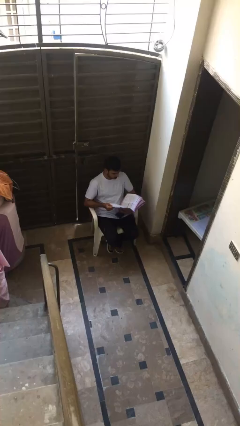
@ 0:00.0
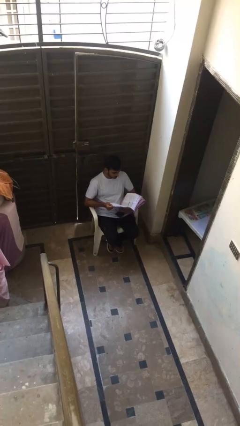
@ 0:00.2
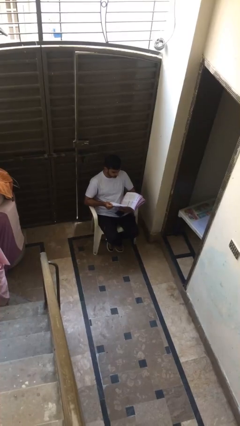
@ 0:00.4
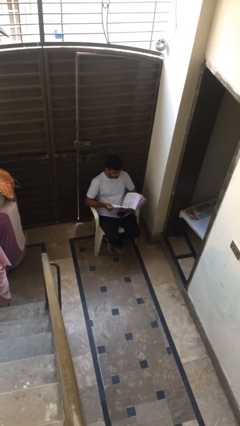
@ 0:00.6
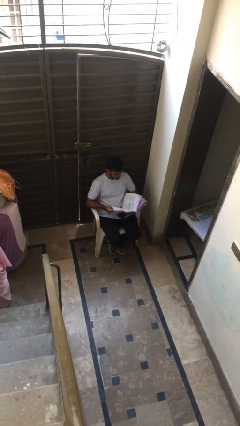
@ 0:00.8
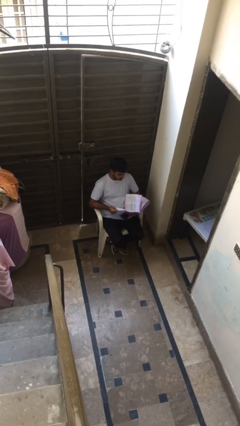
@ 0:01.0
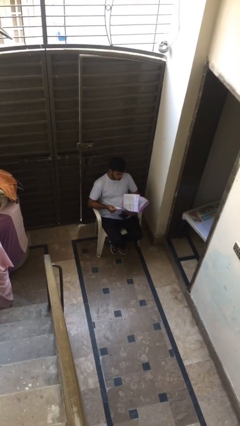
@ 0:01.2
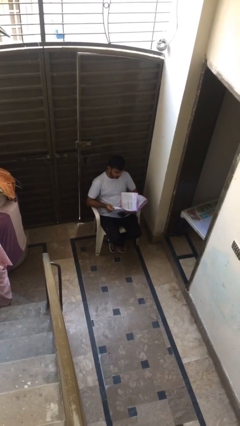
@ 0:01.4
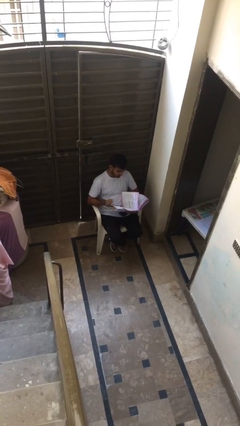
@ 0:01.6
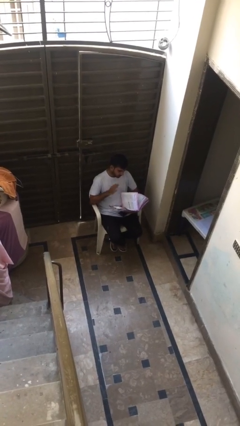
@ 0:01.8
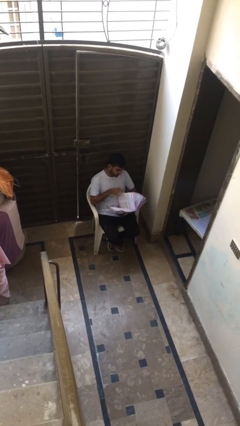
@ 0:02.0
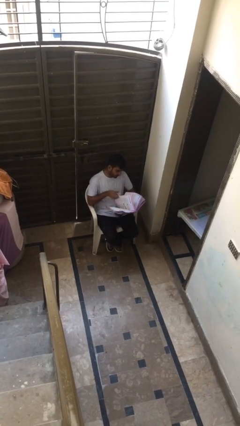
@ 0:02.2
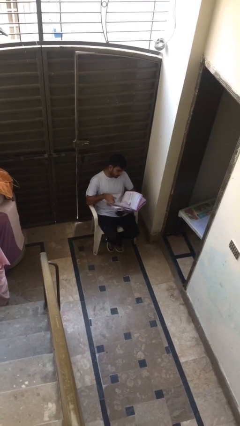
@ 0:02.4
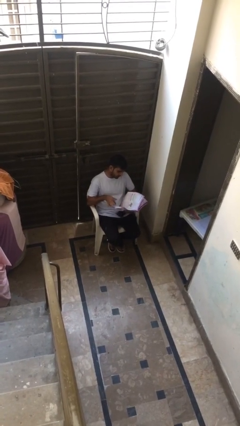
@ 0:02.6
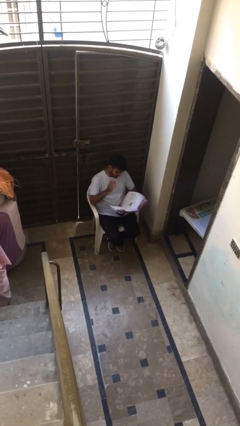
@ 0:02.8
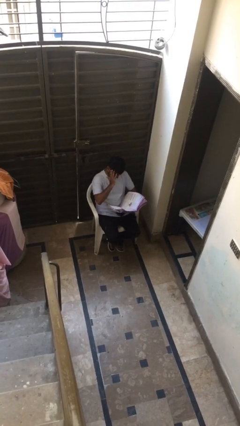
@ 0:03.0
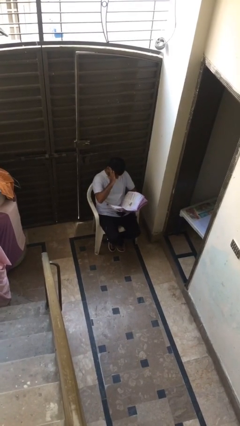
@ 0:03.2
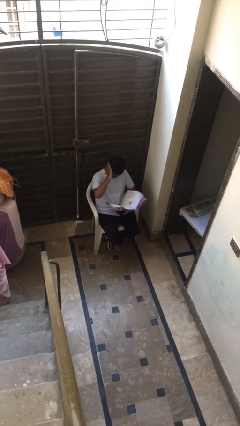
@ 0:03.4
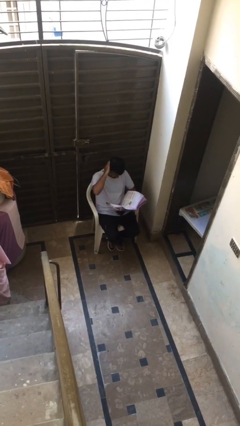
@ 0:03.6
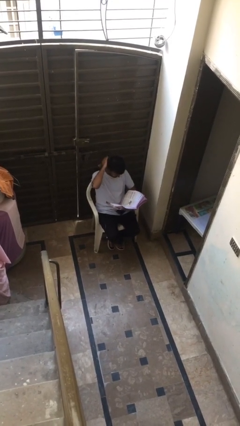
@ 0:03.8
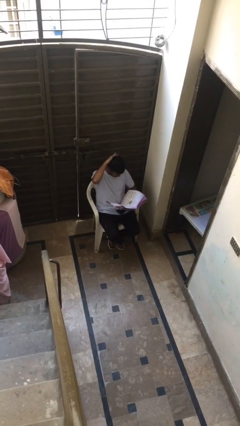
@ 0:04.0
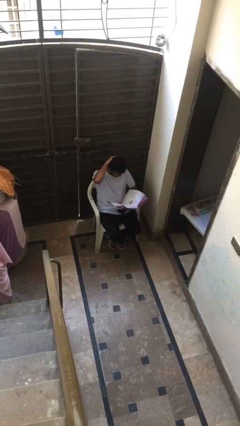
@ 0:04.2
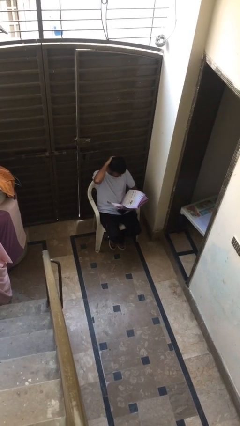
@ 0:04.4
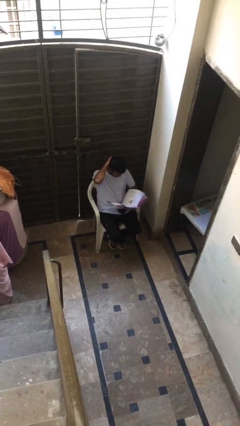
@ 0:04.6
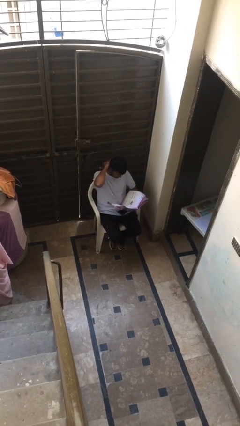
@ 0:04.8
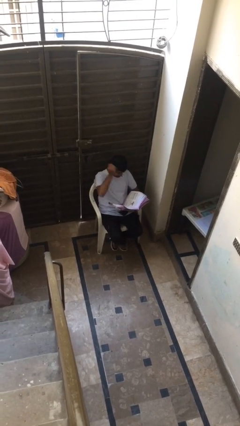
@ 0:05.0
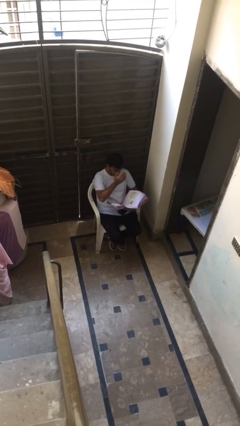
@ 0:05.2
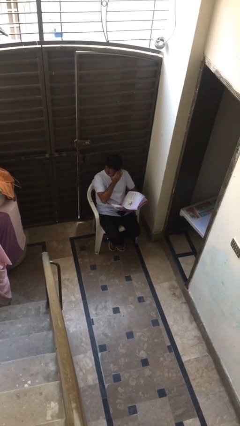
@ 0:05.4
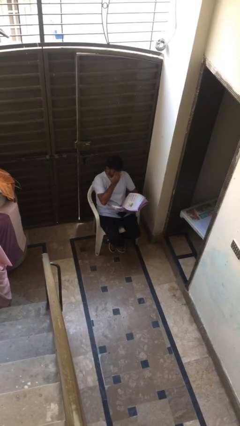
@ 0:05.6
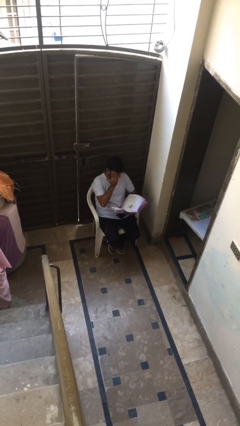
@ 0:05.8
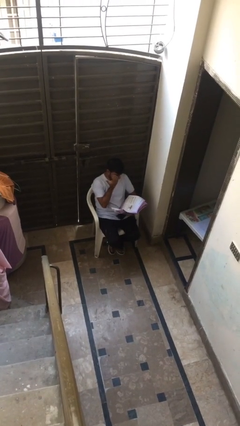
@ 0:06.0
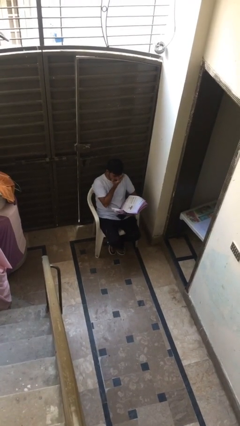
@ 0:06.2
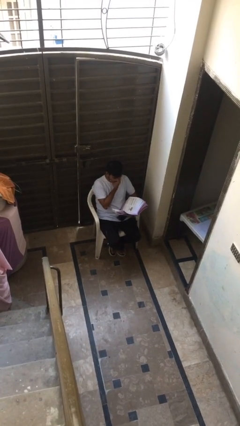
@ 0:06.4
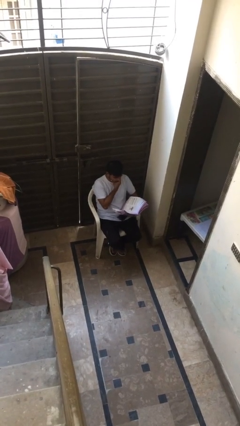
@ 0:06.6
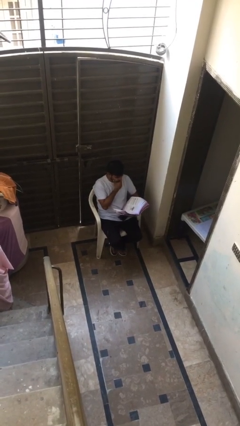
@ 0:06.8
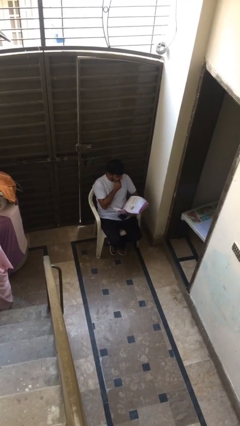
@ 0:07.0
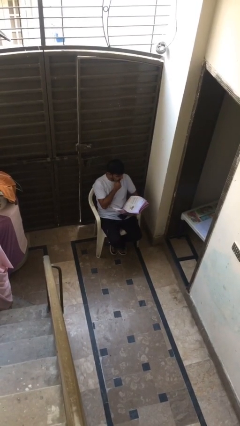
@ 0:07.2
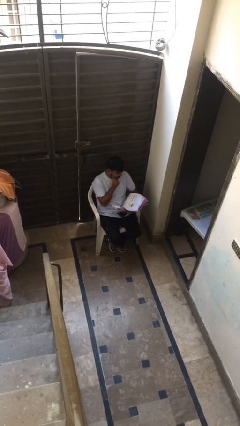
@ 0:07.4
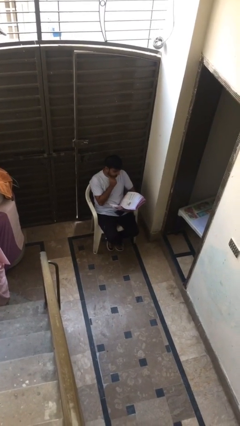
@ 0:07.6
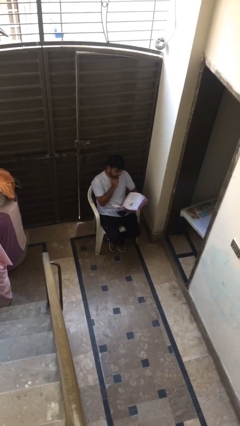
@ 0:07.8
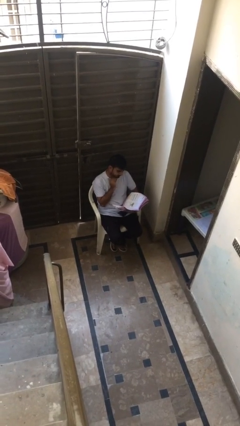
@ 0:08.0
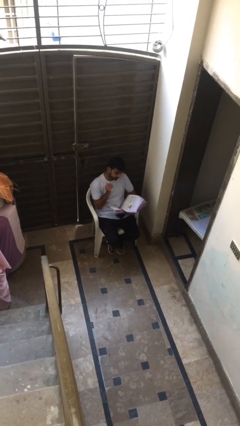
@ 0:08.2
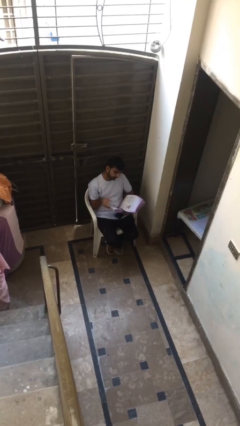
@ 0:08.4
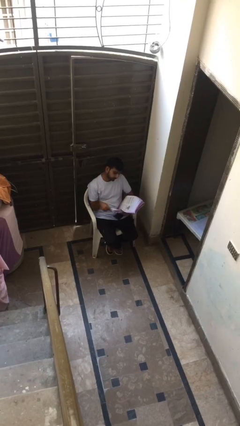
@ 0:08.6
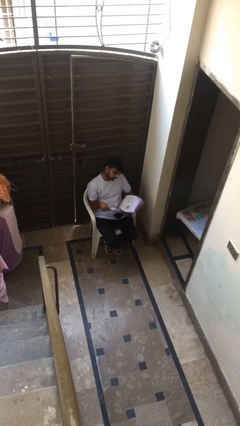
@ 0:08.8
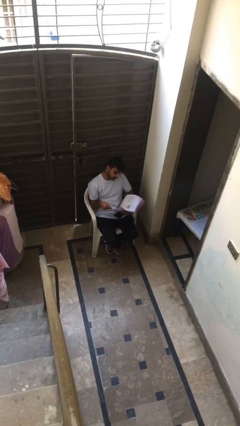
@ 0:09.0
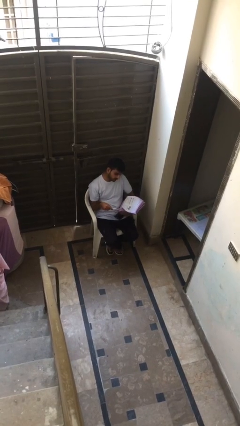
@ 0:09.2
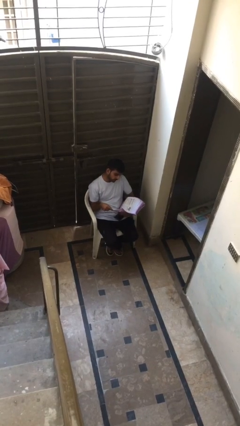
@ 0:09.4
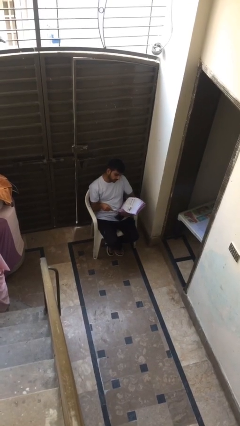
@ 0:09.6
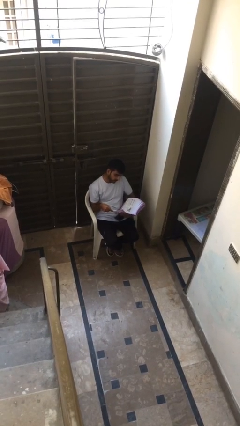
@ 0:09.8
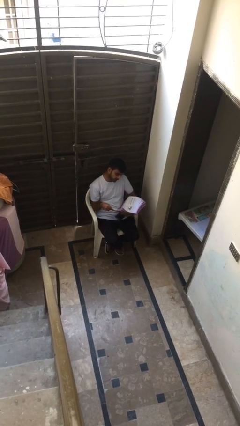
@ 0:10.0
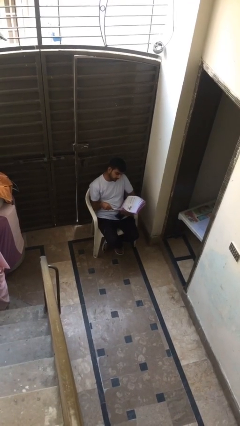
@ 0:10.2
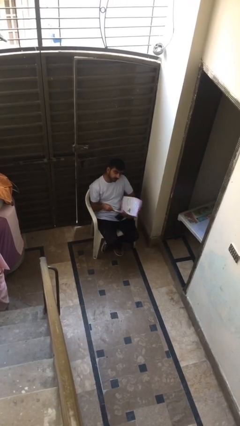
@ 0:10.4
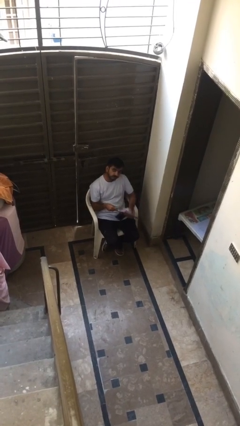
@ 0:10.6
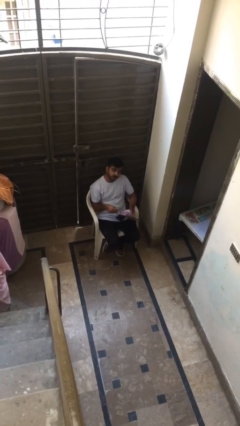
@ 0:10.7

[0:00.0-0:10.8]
person reads document

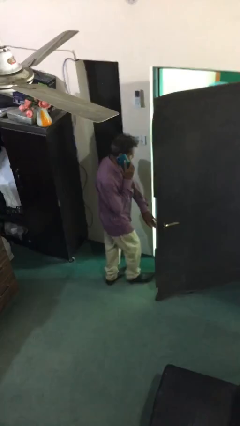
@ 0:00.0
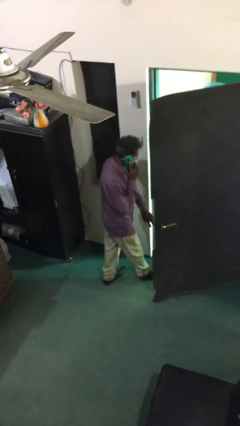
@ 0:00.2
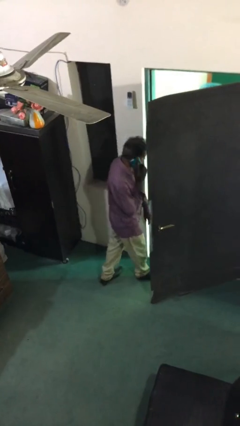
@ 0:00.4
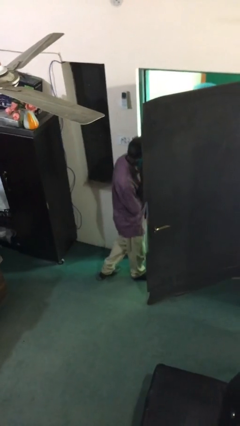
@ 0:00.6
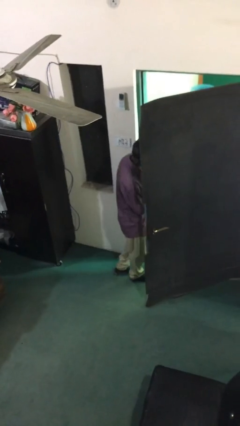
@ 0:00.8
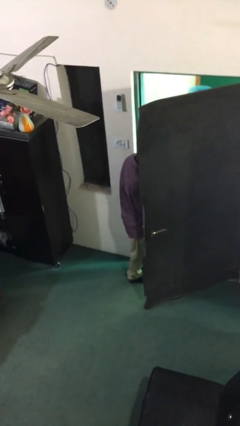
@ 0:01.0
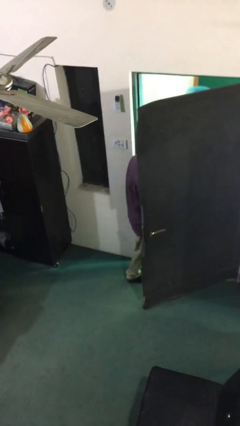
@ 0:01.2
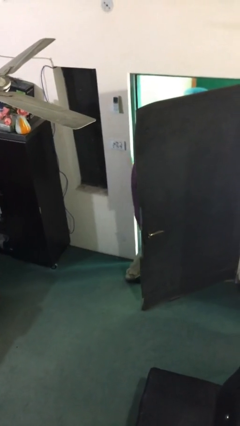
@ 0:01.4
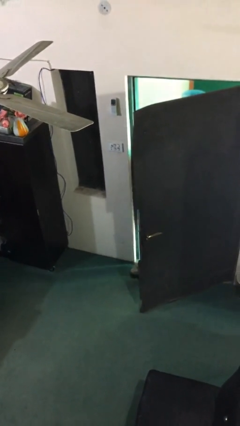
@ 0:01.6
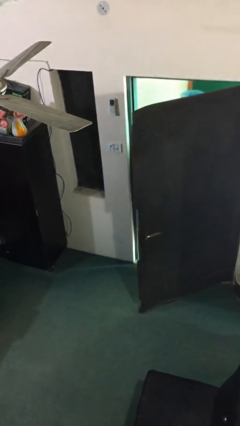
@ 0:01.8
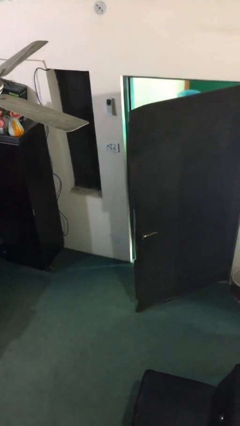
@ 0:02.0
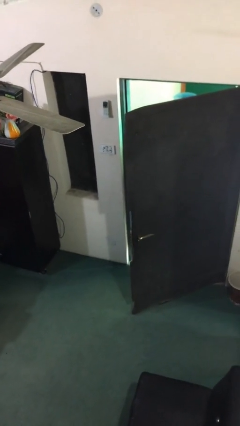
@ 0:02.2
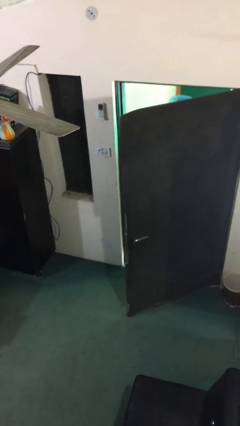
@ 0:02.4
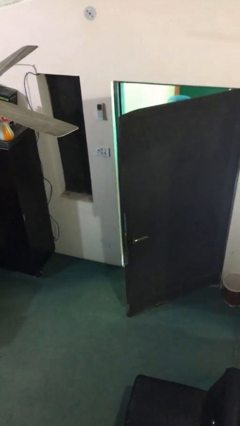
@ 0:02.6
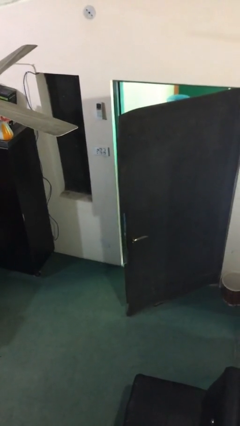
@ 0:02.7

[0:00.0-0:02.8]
person exits scene through structure

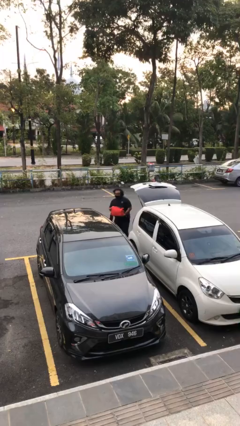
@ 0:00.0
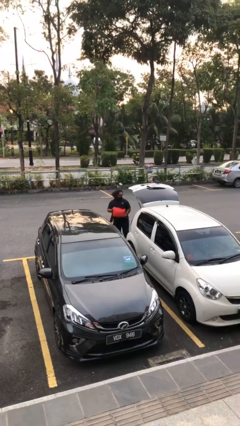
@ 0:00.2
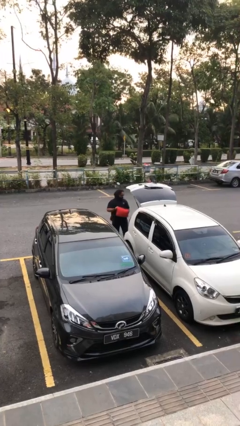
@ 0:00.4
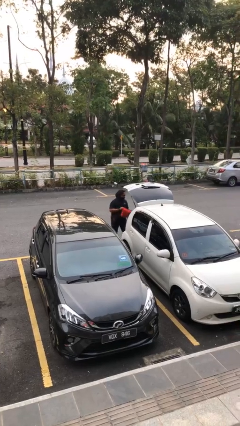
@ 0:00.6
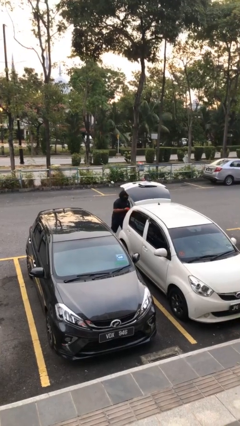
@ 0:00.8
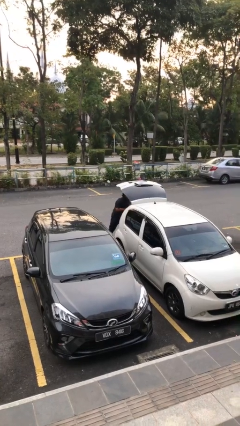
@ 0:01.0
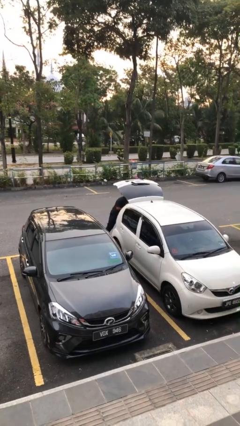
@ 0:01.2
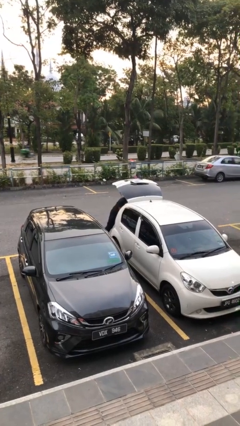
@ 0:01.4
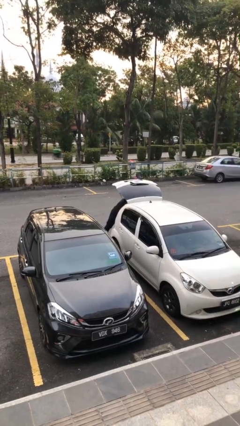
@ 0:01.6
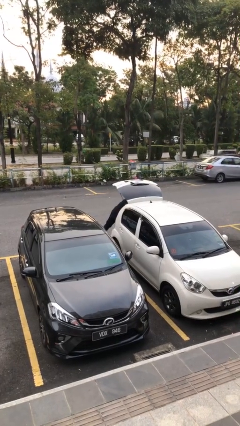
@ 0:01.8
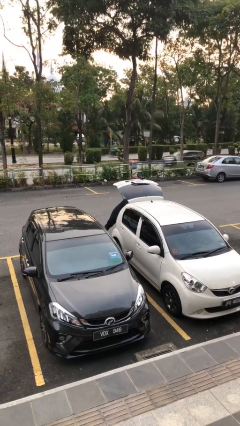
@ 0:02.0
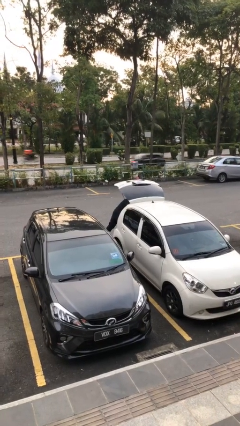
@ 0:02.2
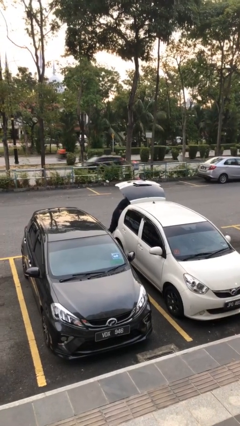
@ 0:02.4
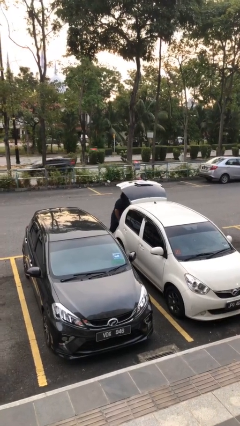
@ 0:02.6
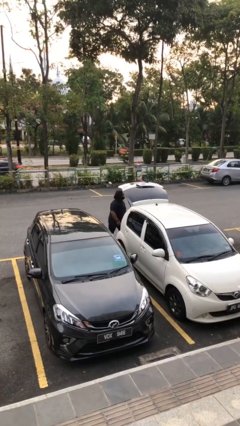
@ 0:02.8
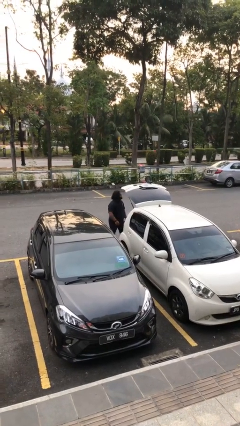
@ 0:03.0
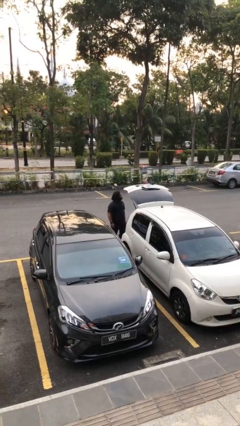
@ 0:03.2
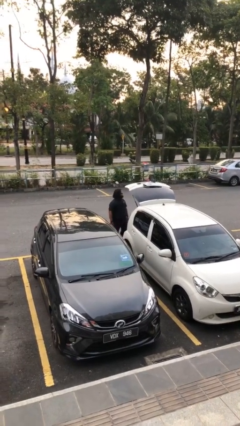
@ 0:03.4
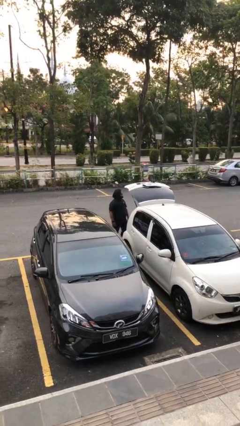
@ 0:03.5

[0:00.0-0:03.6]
person loads car

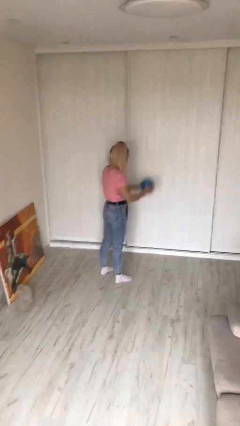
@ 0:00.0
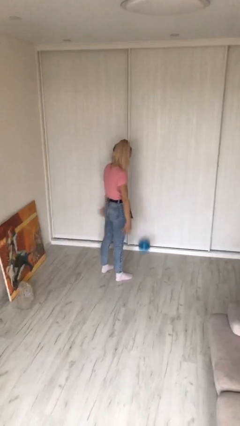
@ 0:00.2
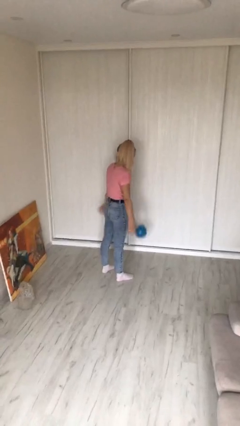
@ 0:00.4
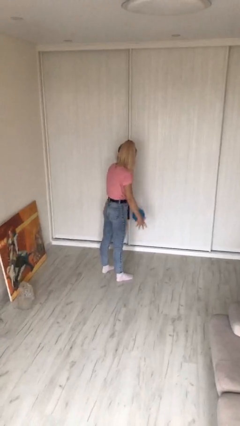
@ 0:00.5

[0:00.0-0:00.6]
person bounces ball on floor
